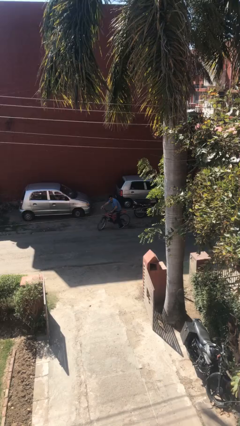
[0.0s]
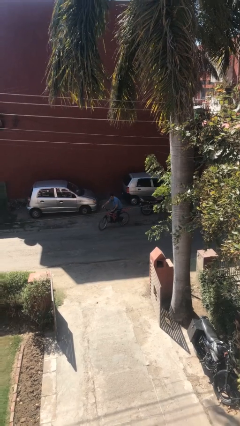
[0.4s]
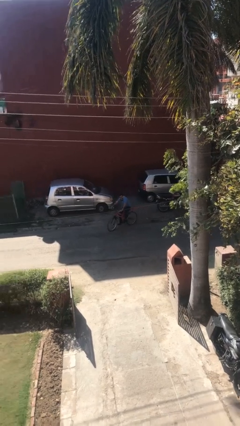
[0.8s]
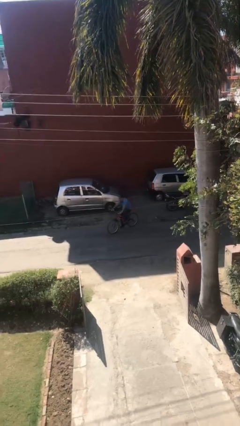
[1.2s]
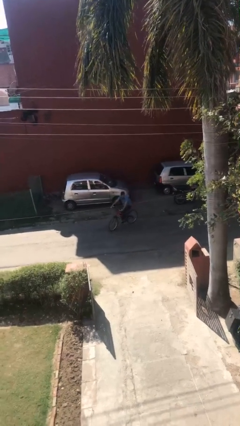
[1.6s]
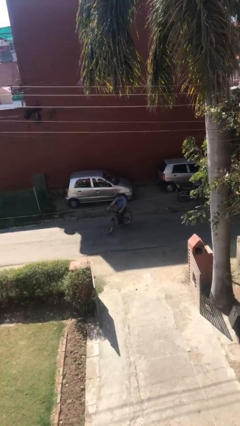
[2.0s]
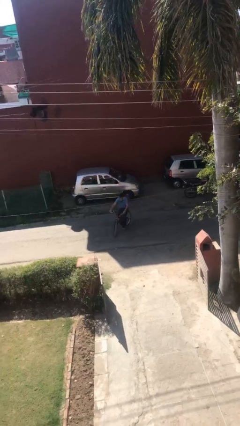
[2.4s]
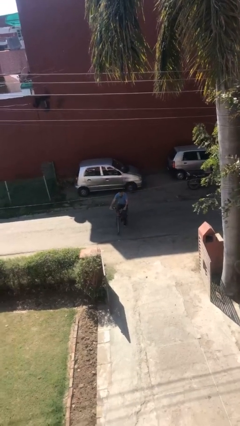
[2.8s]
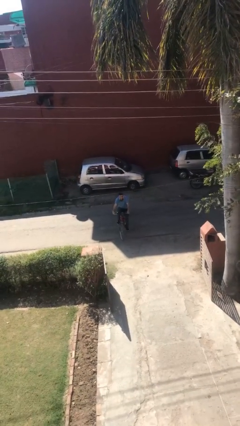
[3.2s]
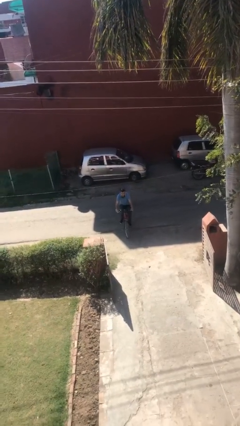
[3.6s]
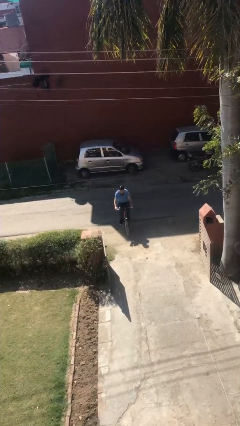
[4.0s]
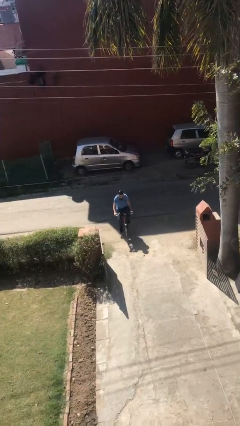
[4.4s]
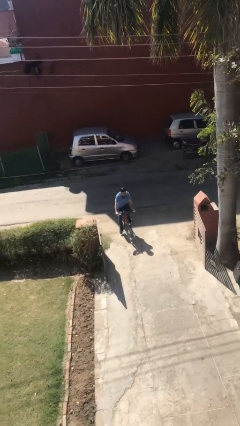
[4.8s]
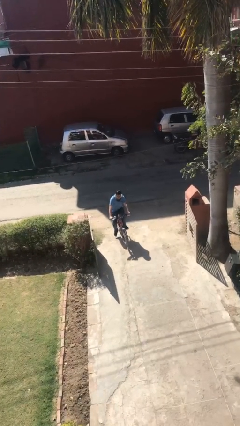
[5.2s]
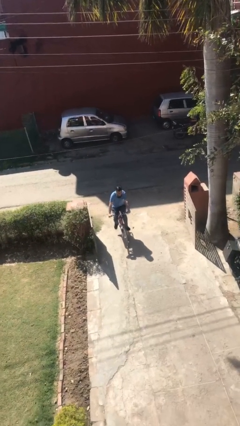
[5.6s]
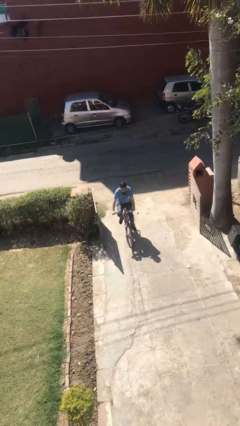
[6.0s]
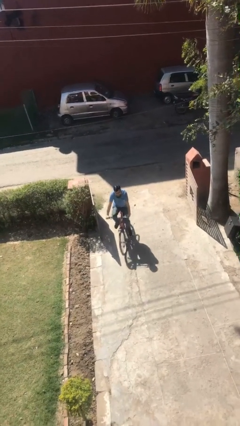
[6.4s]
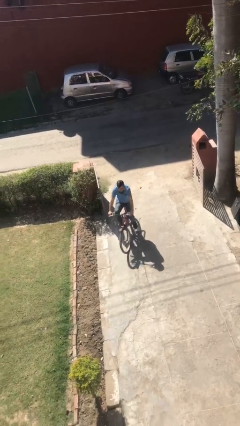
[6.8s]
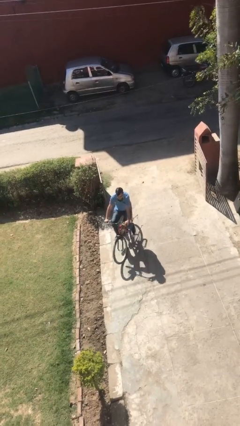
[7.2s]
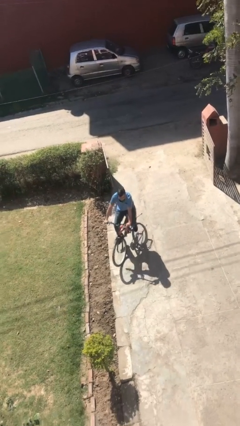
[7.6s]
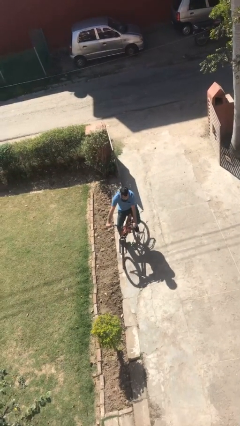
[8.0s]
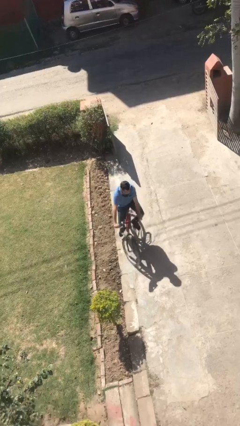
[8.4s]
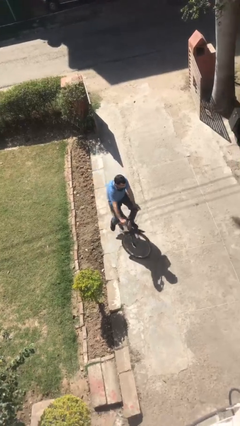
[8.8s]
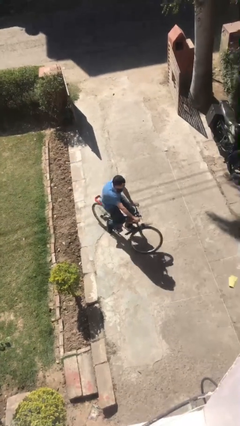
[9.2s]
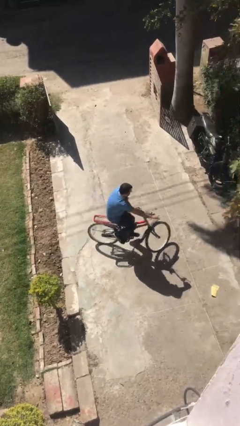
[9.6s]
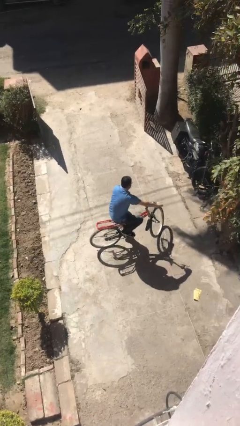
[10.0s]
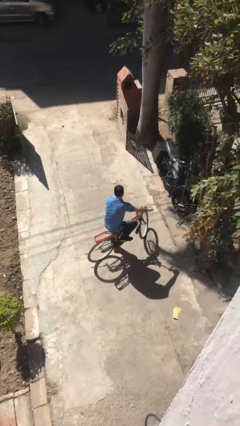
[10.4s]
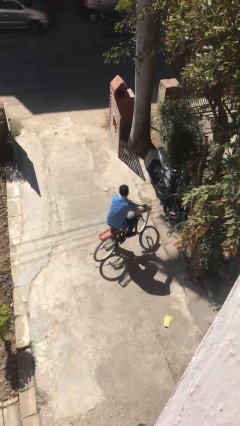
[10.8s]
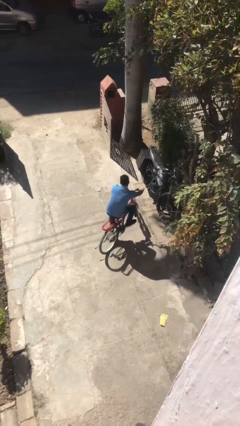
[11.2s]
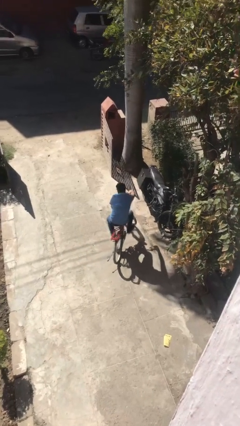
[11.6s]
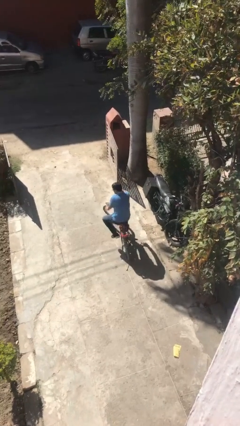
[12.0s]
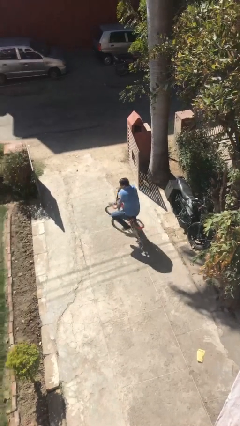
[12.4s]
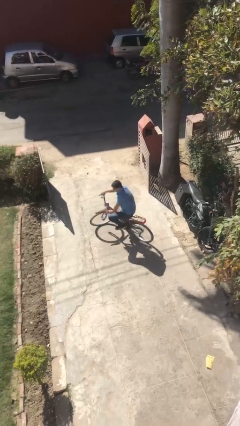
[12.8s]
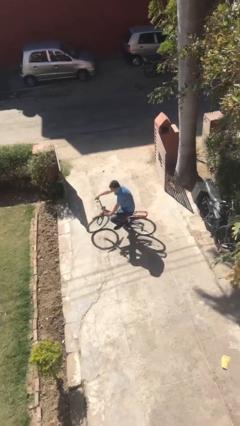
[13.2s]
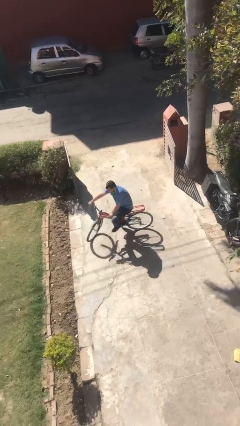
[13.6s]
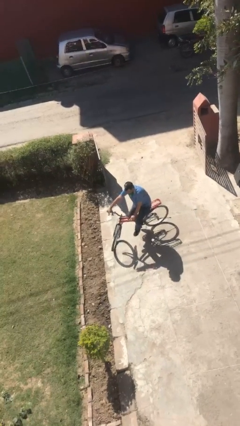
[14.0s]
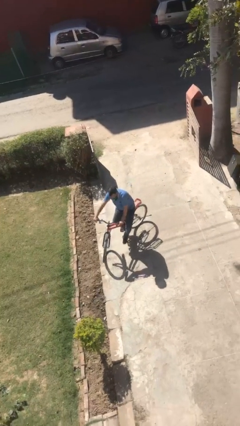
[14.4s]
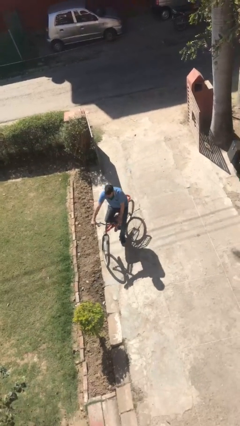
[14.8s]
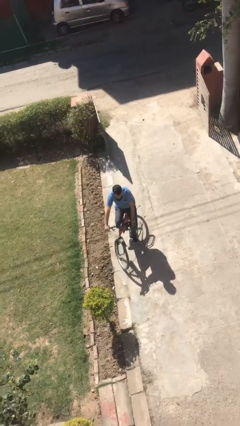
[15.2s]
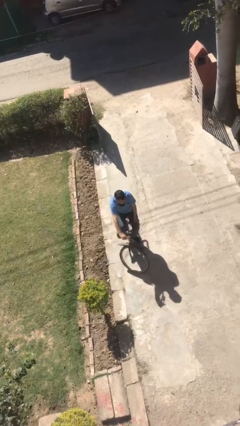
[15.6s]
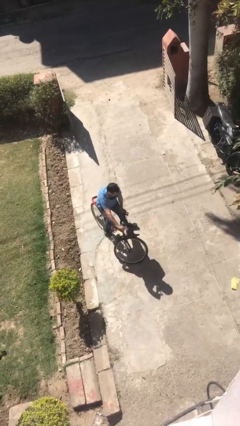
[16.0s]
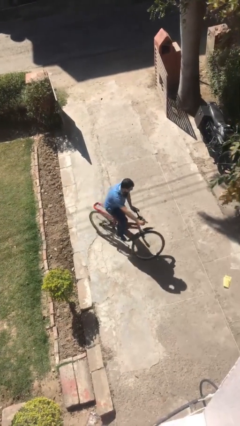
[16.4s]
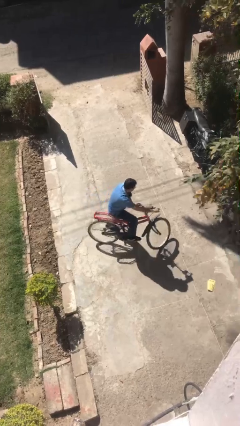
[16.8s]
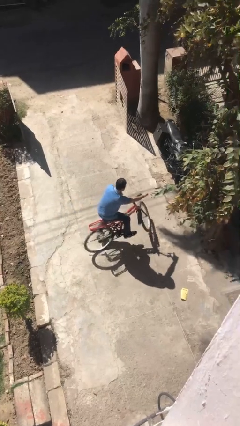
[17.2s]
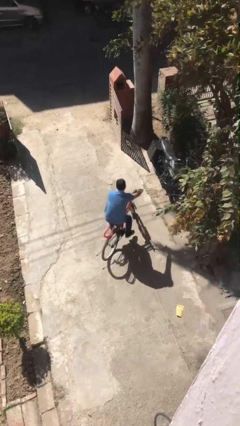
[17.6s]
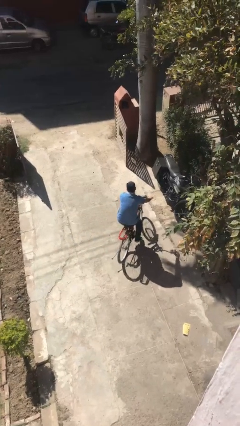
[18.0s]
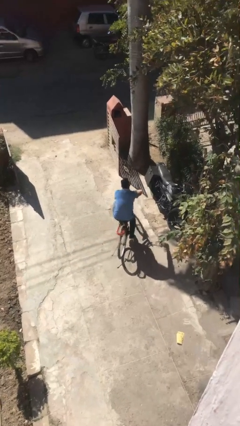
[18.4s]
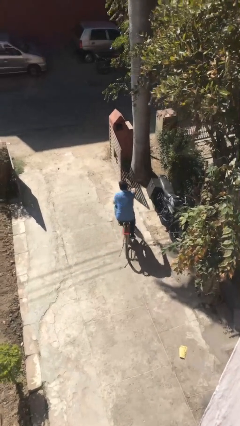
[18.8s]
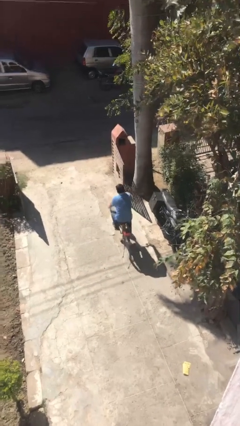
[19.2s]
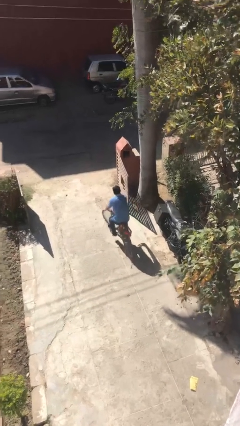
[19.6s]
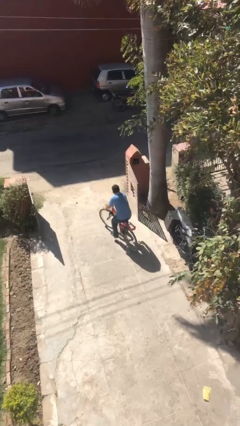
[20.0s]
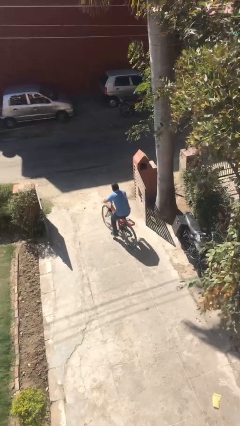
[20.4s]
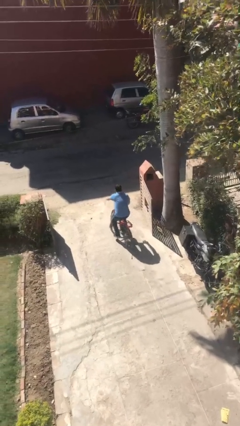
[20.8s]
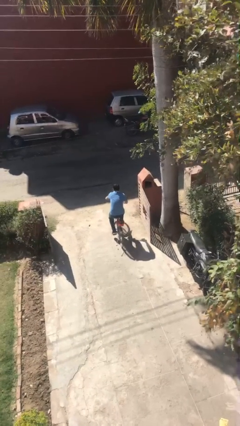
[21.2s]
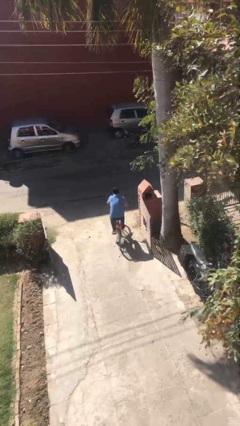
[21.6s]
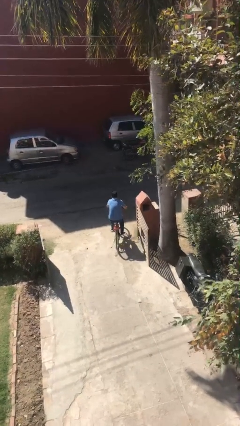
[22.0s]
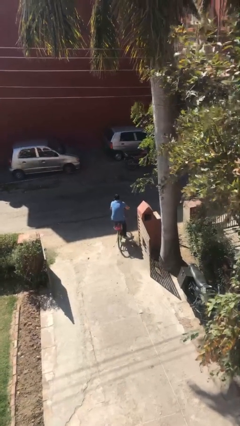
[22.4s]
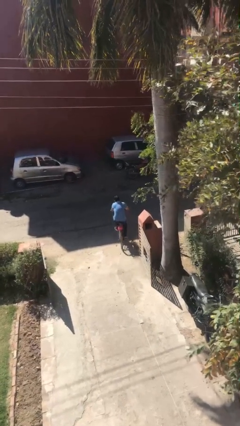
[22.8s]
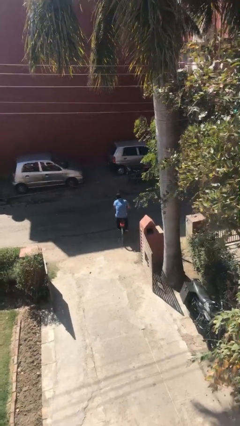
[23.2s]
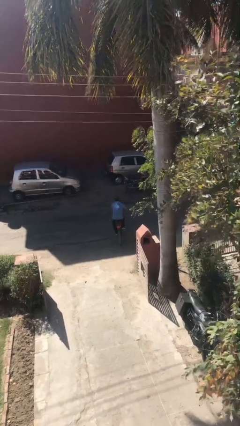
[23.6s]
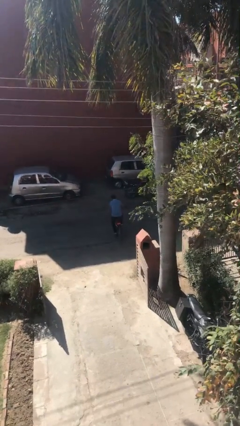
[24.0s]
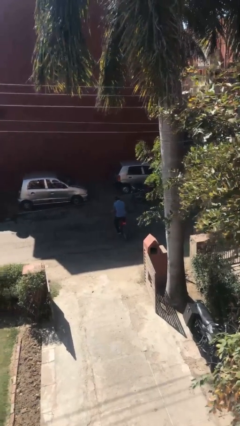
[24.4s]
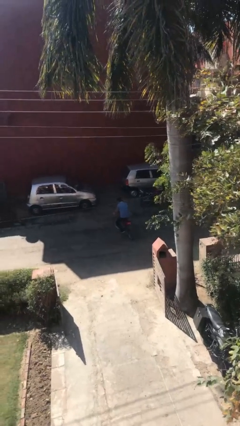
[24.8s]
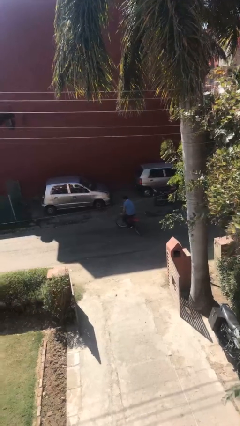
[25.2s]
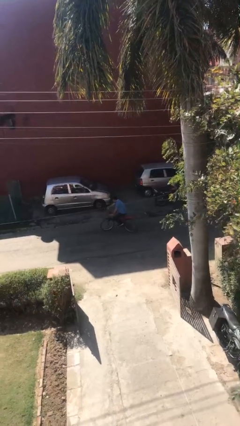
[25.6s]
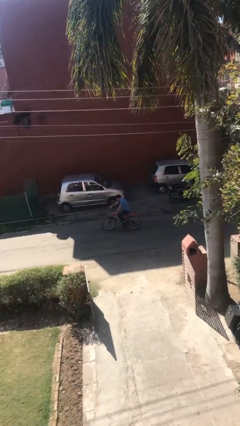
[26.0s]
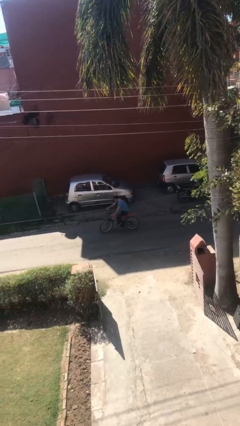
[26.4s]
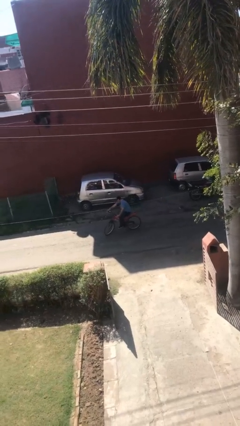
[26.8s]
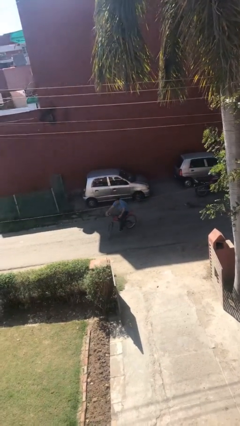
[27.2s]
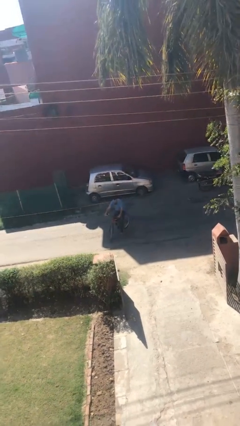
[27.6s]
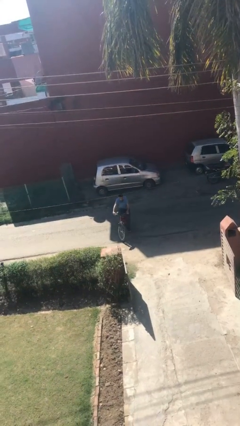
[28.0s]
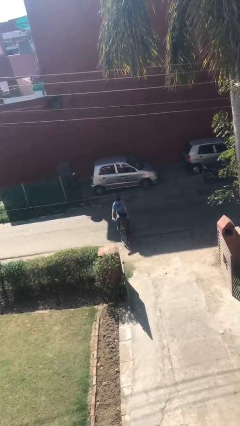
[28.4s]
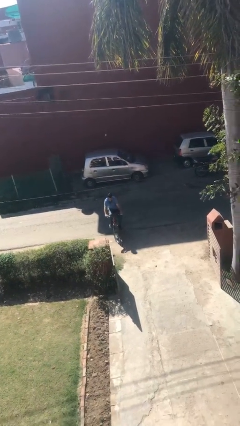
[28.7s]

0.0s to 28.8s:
person rides bicycle

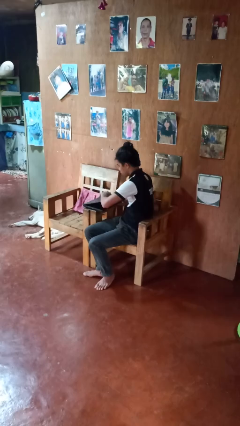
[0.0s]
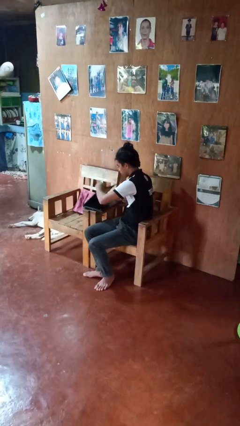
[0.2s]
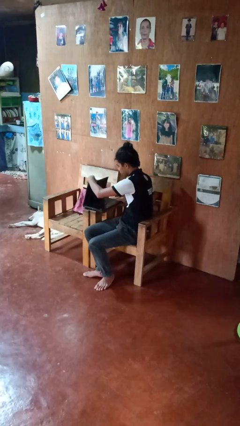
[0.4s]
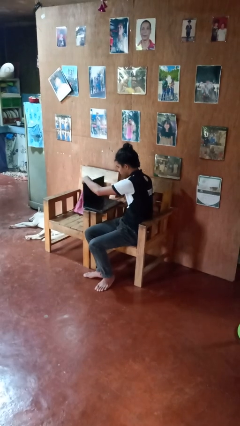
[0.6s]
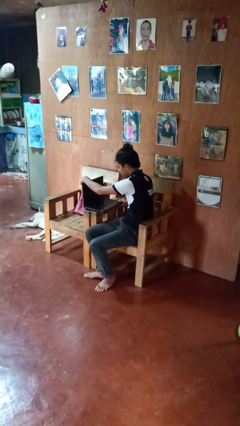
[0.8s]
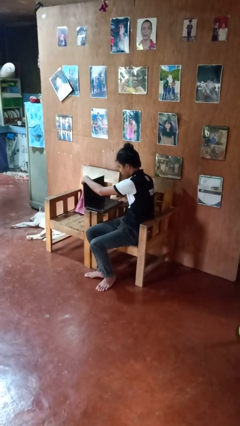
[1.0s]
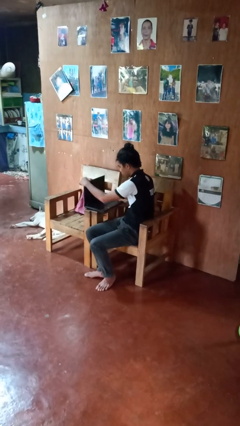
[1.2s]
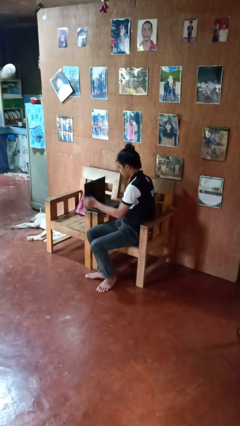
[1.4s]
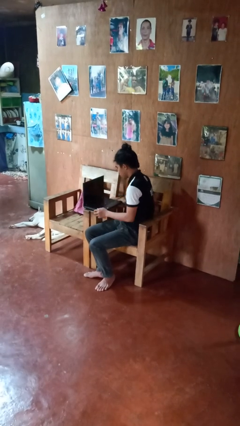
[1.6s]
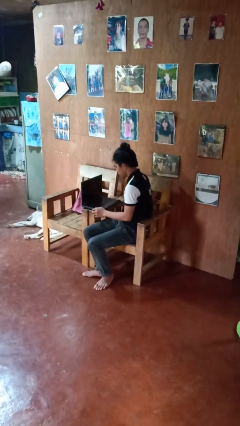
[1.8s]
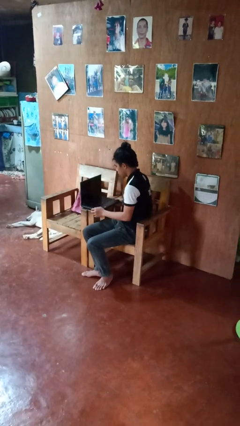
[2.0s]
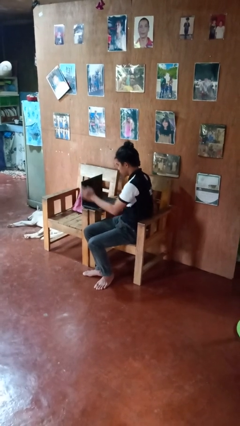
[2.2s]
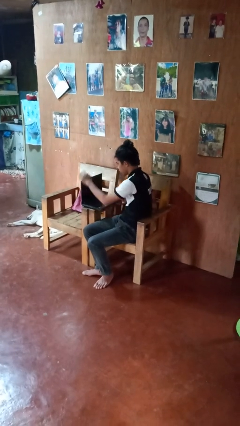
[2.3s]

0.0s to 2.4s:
person opens laptop

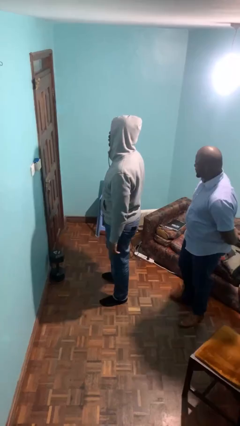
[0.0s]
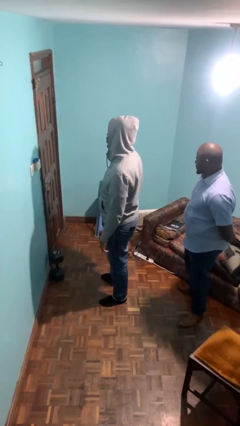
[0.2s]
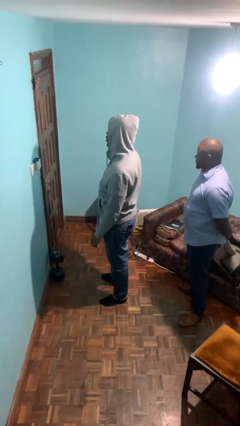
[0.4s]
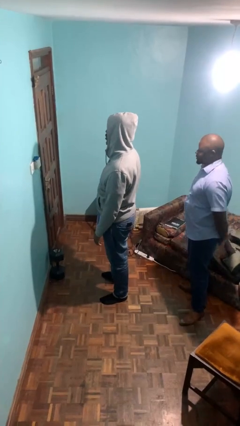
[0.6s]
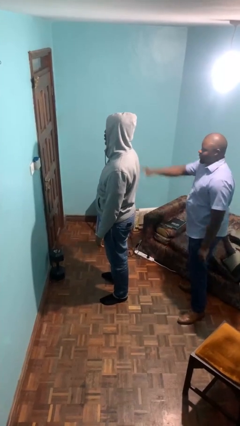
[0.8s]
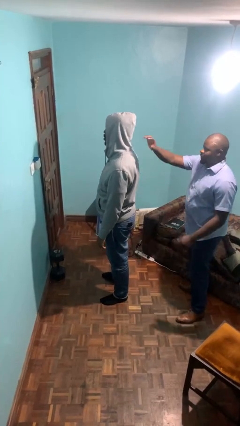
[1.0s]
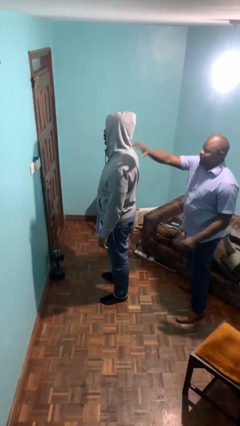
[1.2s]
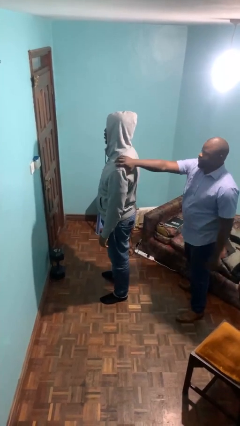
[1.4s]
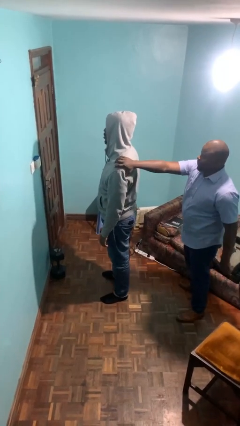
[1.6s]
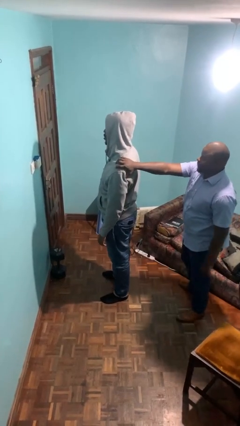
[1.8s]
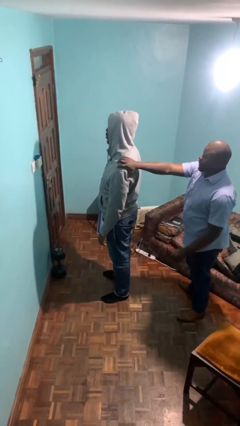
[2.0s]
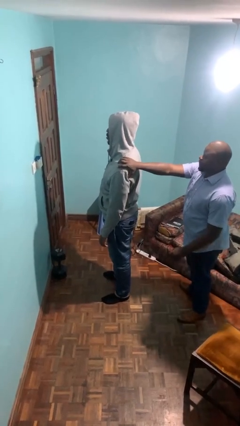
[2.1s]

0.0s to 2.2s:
person grabs person by shoulder
